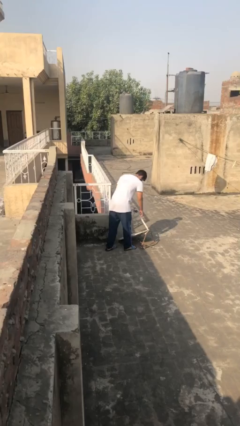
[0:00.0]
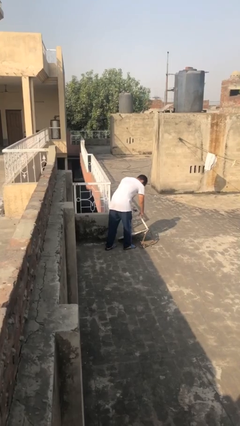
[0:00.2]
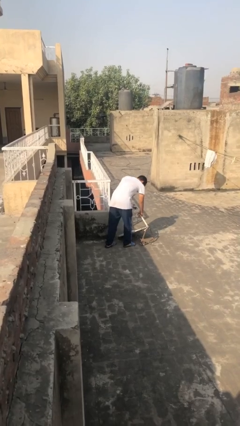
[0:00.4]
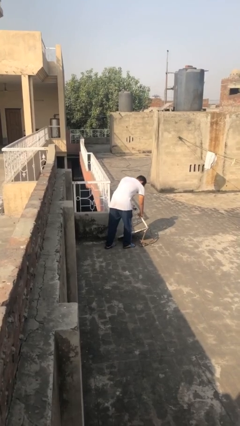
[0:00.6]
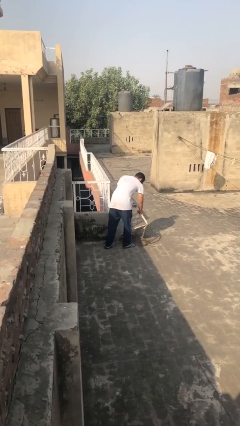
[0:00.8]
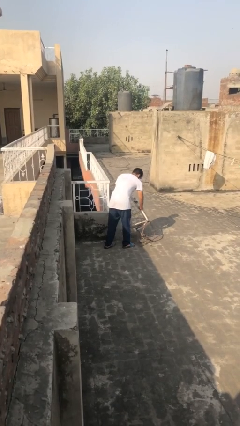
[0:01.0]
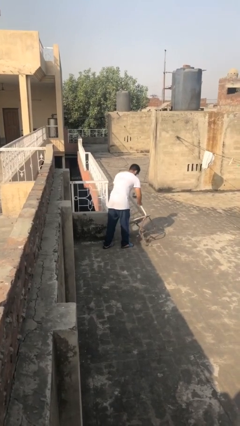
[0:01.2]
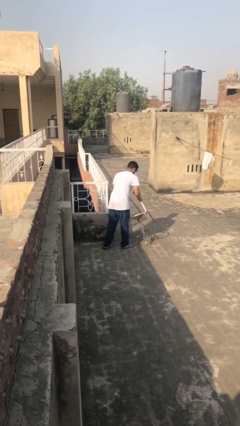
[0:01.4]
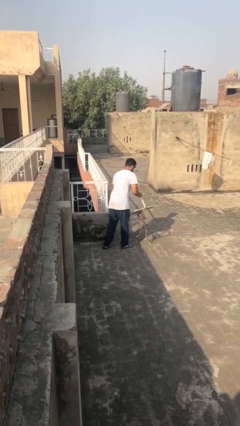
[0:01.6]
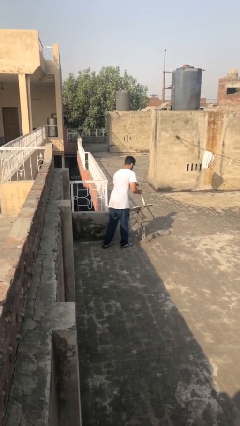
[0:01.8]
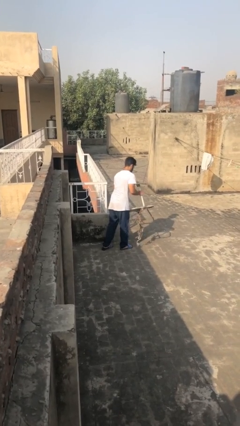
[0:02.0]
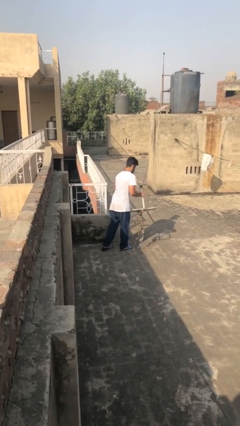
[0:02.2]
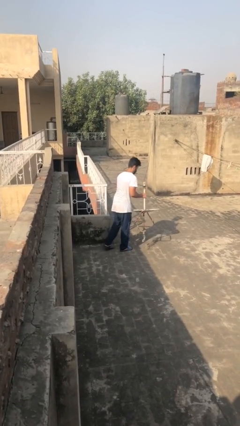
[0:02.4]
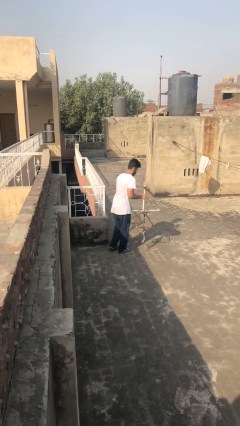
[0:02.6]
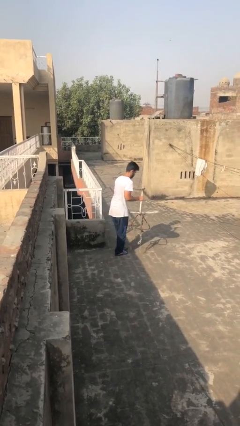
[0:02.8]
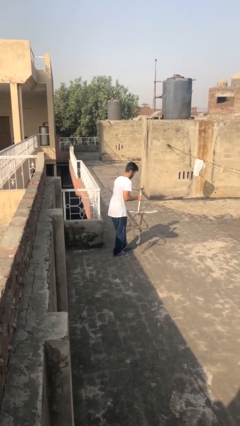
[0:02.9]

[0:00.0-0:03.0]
person picks up object from floor

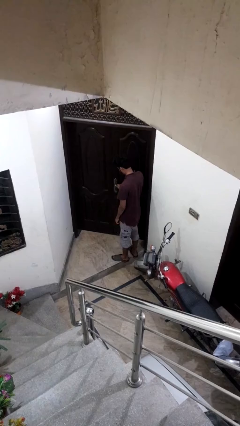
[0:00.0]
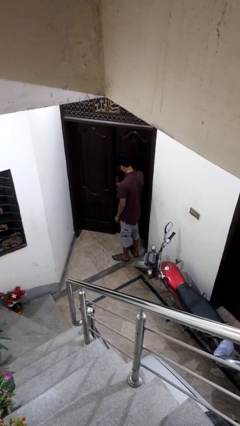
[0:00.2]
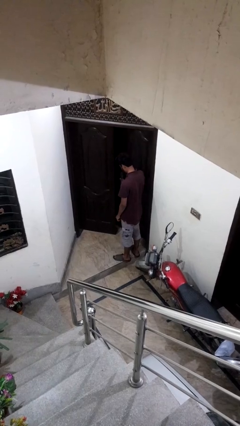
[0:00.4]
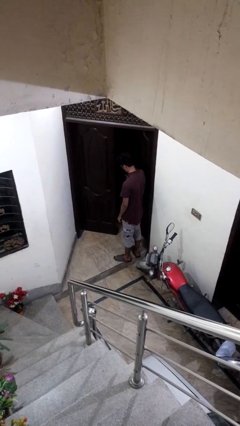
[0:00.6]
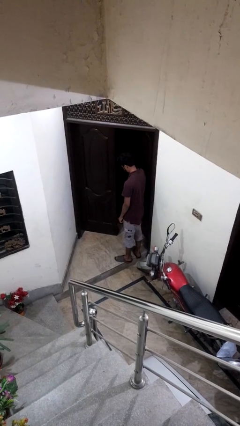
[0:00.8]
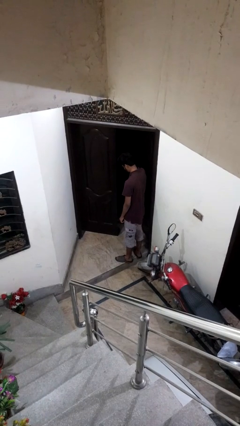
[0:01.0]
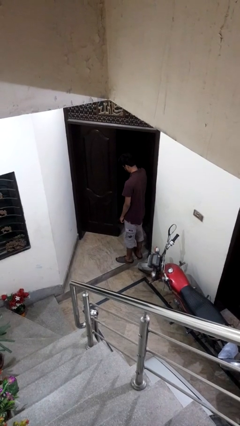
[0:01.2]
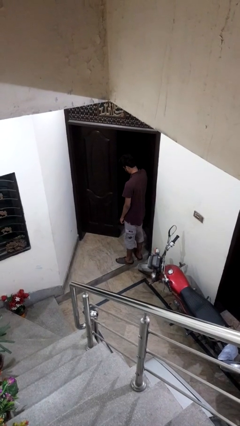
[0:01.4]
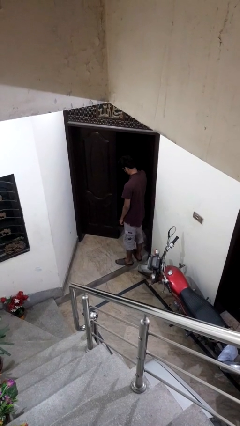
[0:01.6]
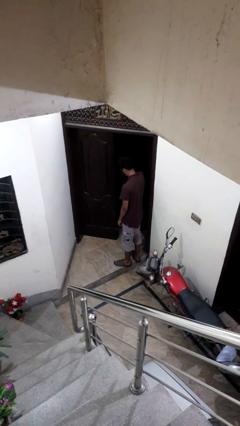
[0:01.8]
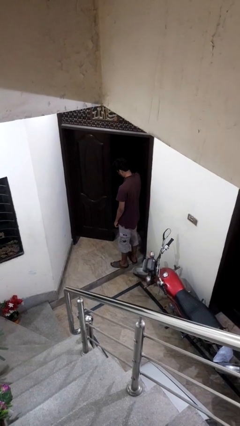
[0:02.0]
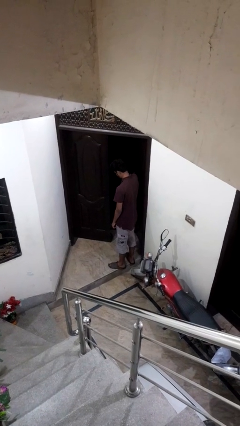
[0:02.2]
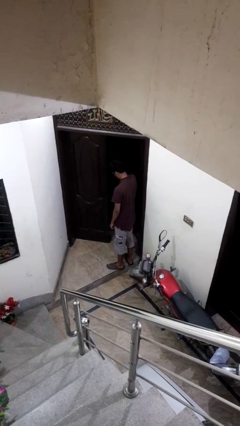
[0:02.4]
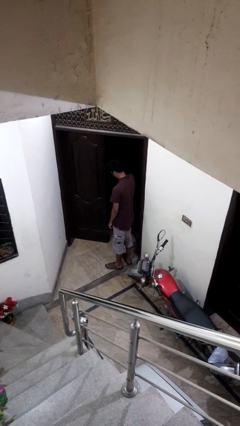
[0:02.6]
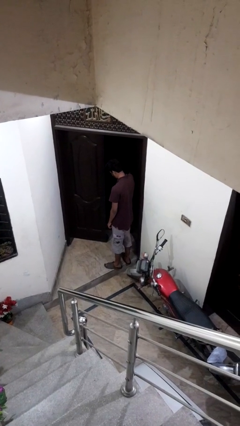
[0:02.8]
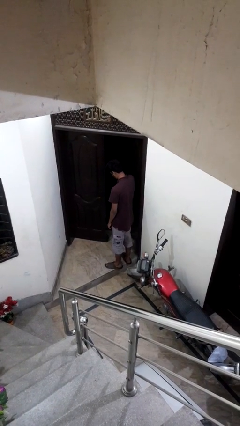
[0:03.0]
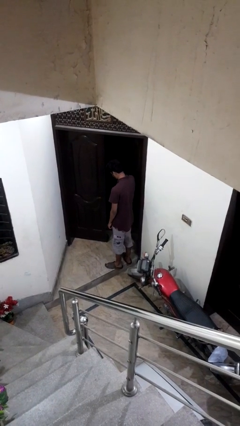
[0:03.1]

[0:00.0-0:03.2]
person opens facility door

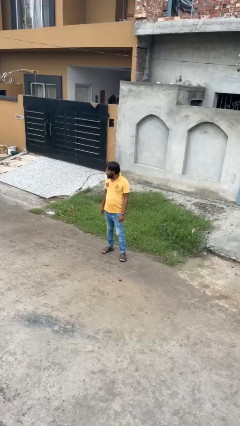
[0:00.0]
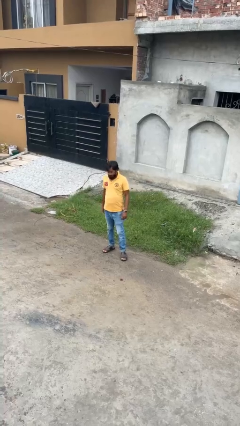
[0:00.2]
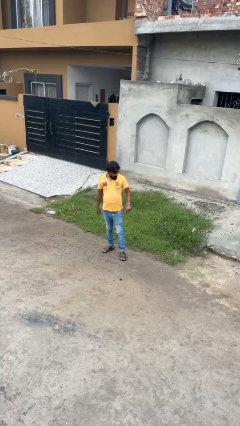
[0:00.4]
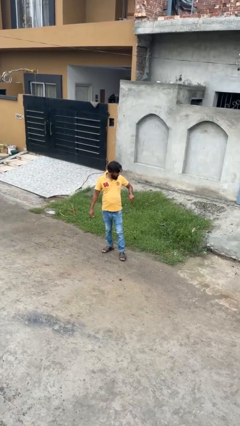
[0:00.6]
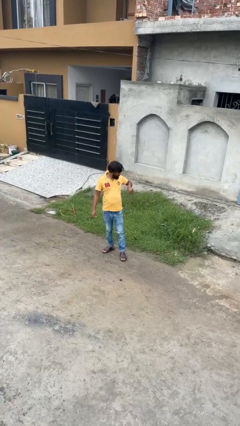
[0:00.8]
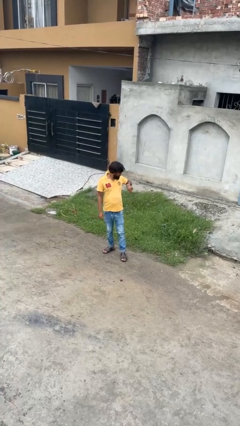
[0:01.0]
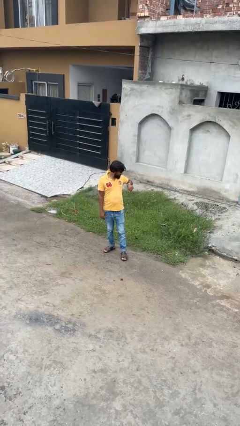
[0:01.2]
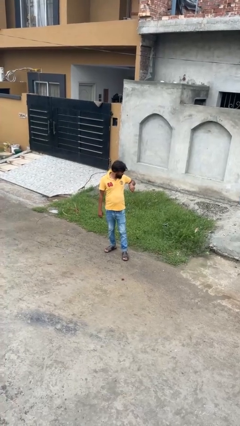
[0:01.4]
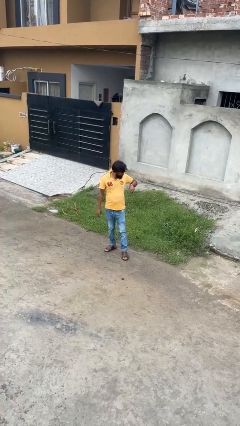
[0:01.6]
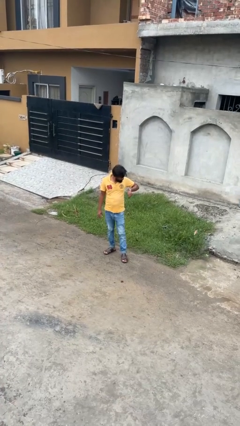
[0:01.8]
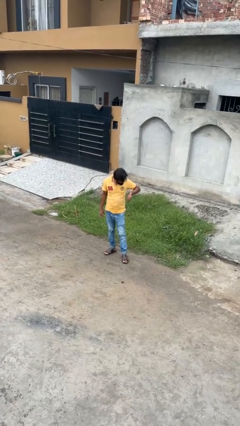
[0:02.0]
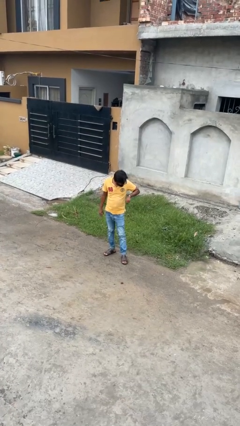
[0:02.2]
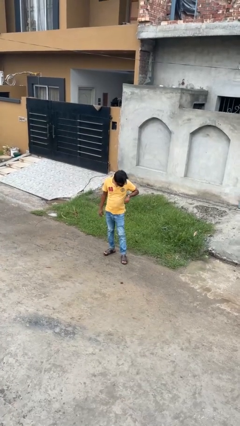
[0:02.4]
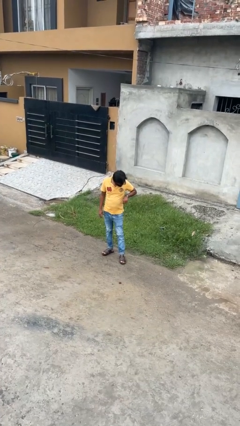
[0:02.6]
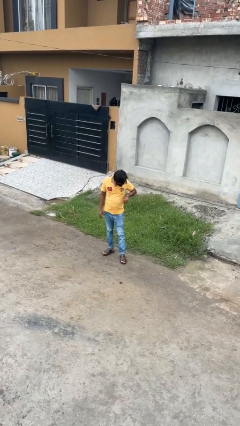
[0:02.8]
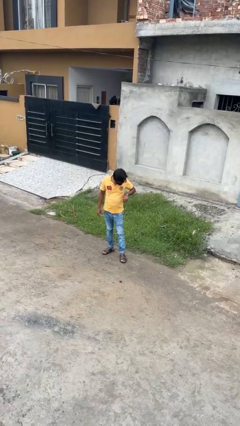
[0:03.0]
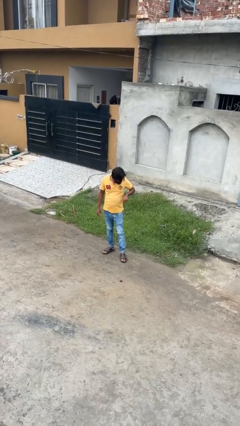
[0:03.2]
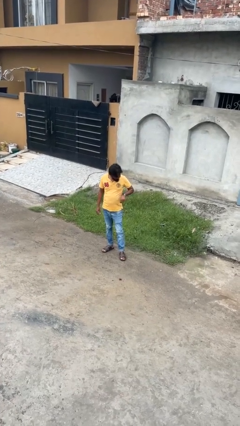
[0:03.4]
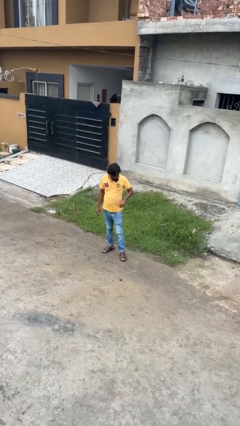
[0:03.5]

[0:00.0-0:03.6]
person looks at wristwatch

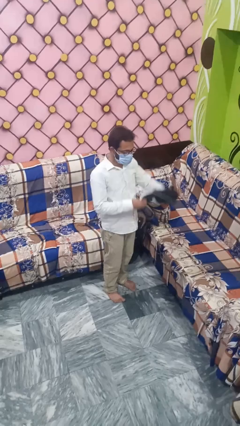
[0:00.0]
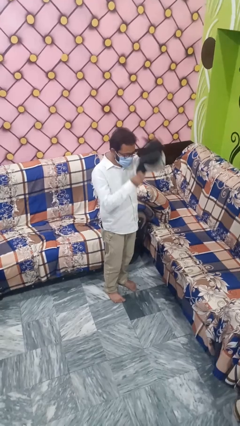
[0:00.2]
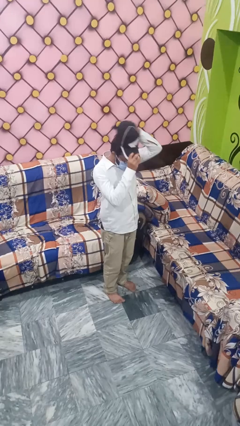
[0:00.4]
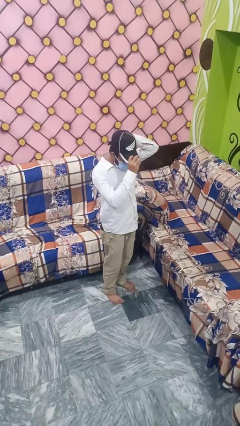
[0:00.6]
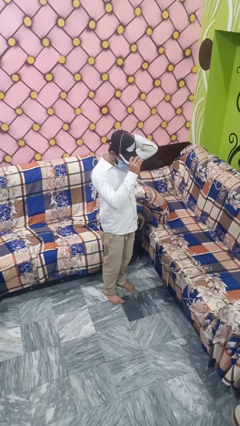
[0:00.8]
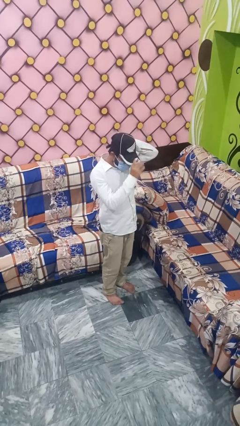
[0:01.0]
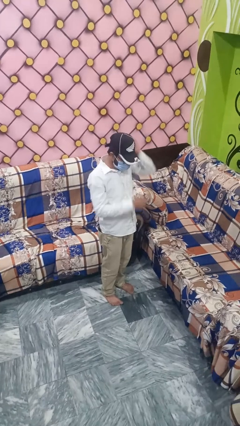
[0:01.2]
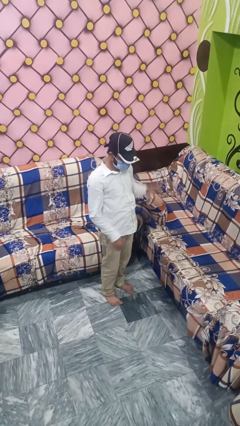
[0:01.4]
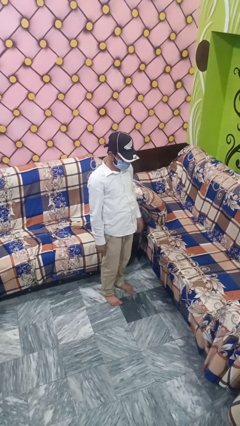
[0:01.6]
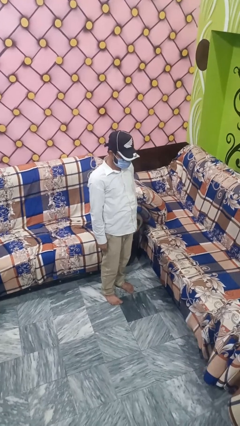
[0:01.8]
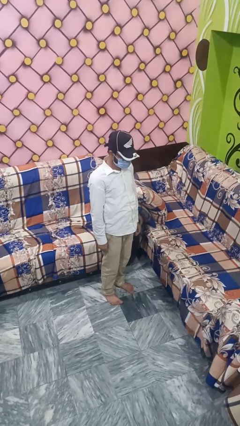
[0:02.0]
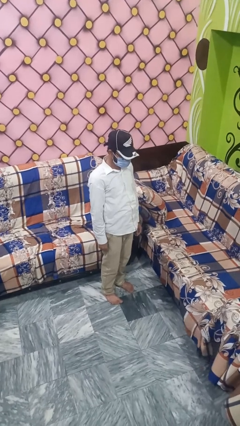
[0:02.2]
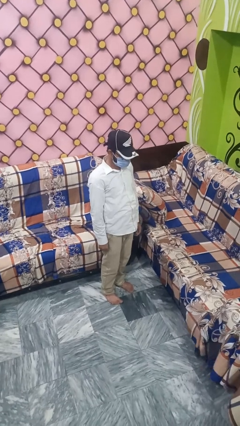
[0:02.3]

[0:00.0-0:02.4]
person puts on hat

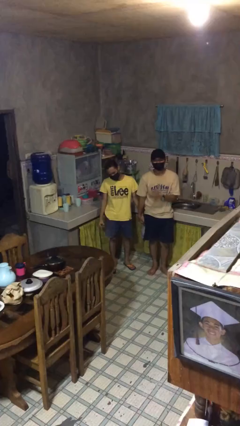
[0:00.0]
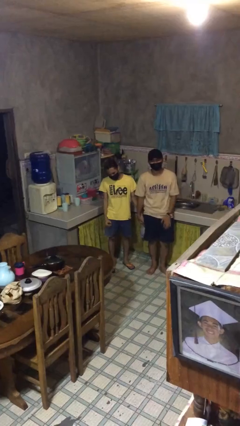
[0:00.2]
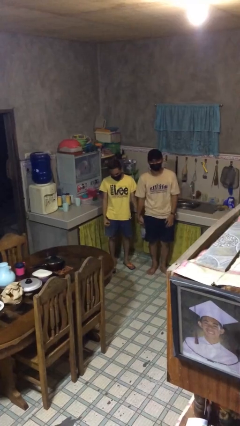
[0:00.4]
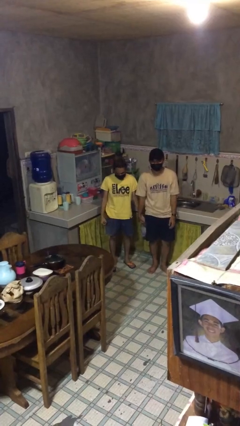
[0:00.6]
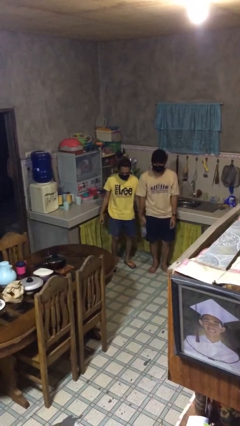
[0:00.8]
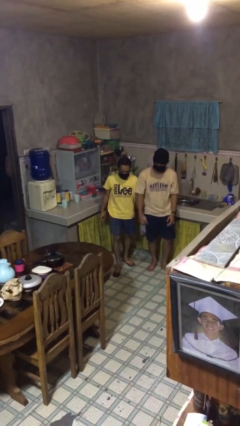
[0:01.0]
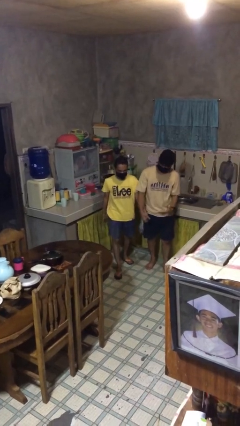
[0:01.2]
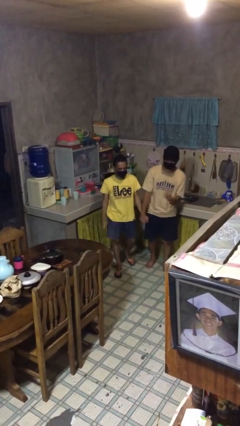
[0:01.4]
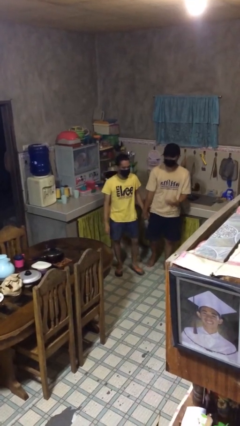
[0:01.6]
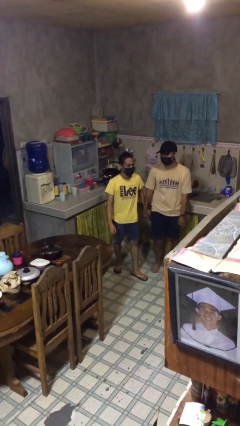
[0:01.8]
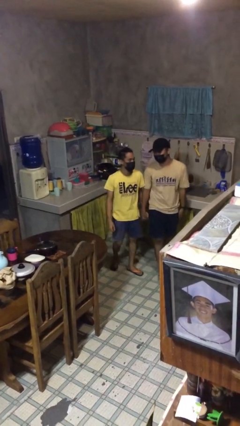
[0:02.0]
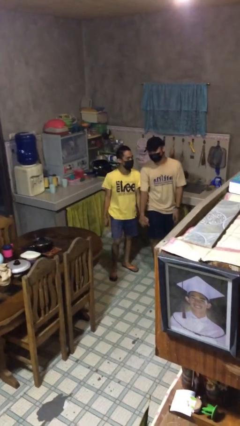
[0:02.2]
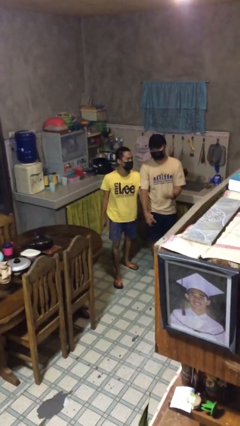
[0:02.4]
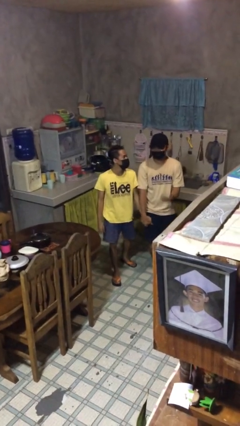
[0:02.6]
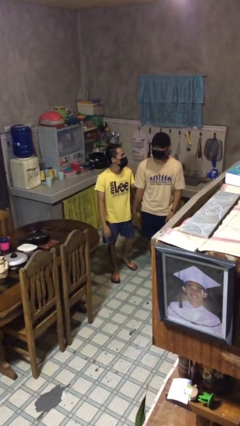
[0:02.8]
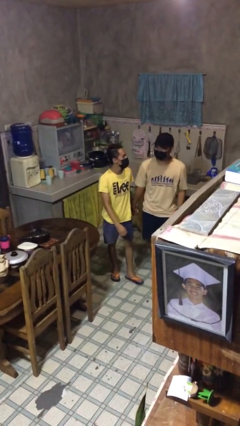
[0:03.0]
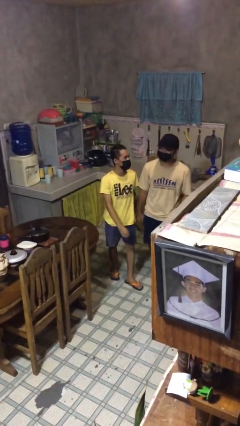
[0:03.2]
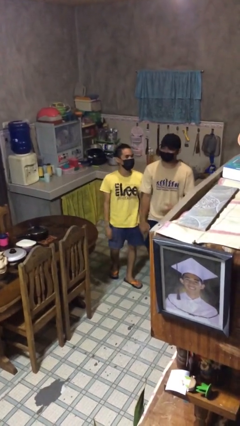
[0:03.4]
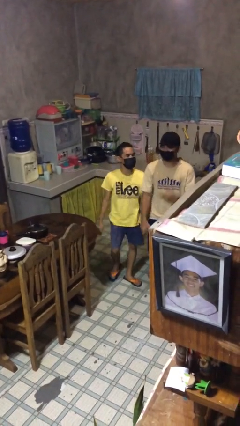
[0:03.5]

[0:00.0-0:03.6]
person holds hand

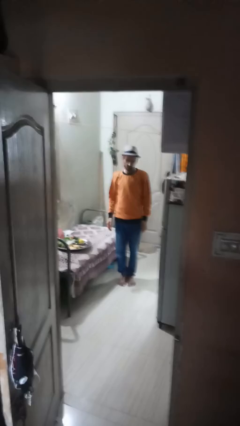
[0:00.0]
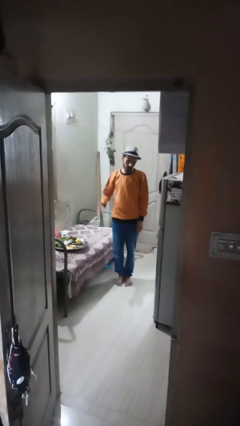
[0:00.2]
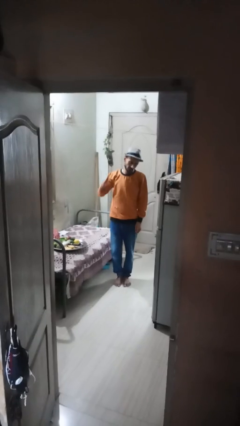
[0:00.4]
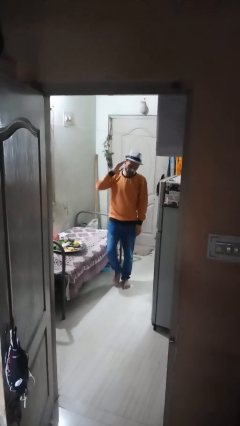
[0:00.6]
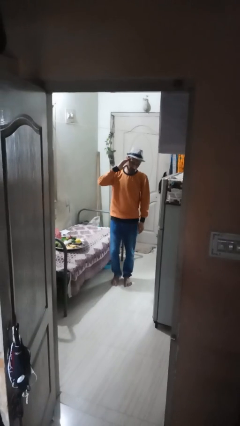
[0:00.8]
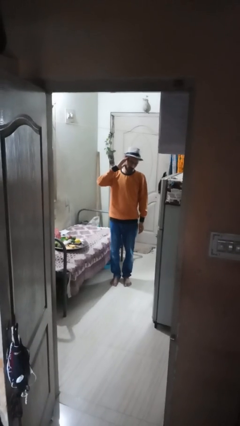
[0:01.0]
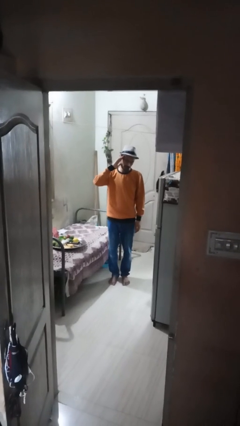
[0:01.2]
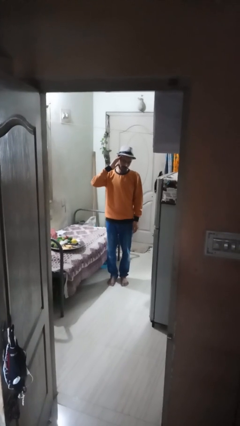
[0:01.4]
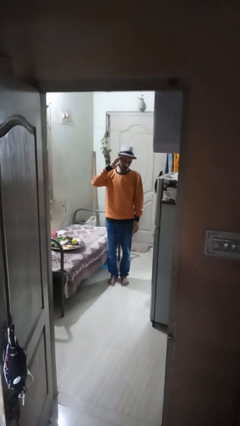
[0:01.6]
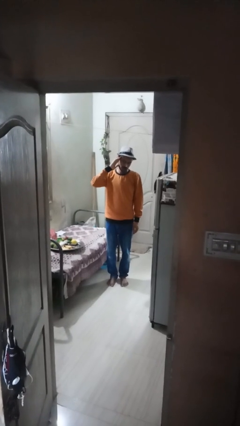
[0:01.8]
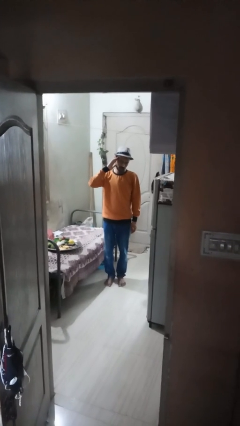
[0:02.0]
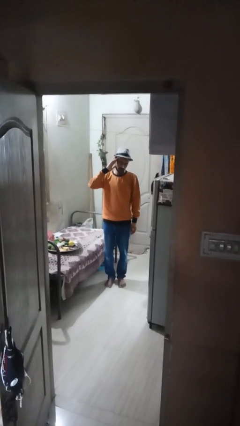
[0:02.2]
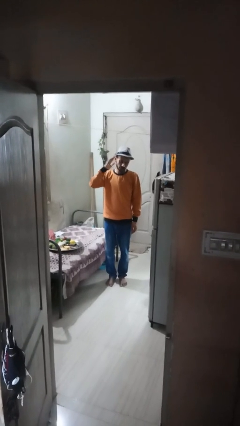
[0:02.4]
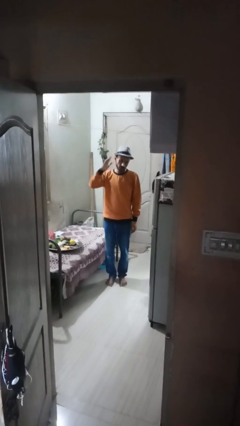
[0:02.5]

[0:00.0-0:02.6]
person salutes
